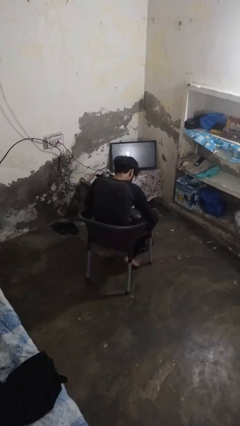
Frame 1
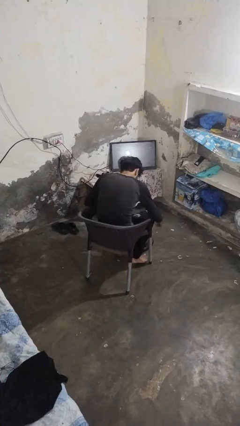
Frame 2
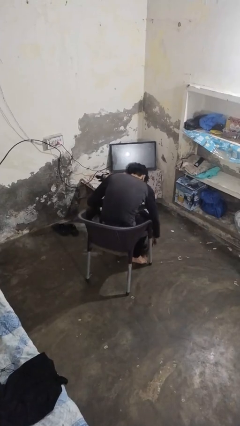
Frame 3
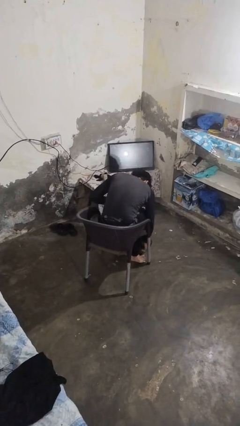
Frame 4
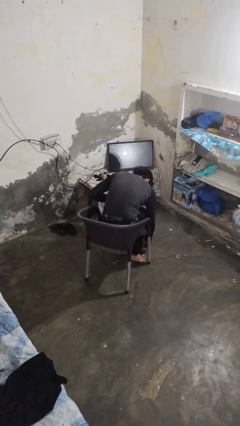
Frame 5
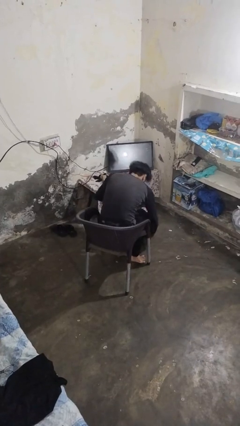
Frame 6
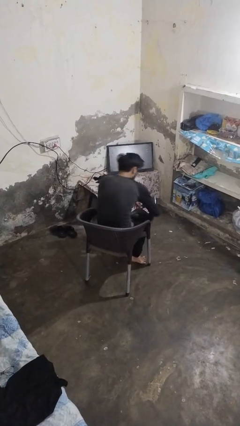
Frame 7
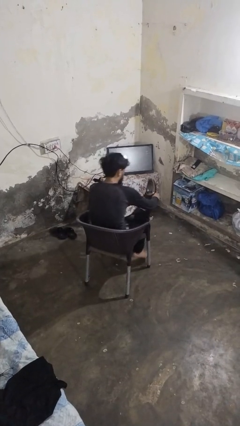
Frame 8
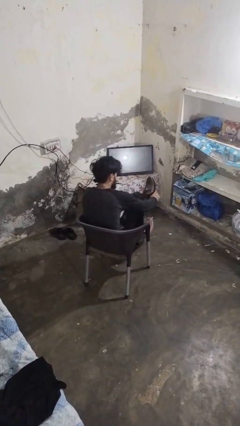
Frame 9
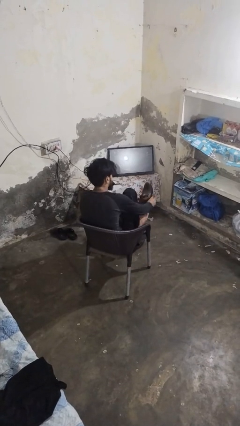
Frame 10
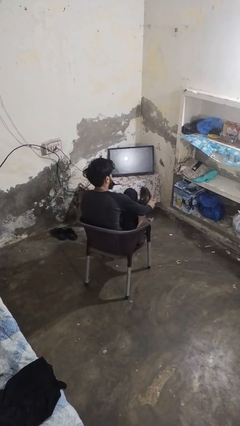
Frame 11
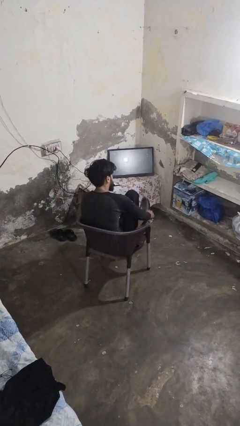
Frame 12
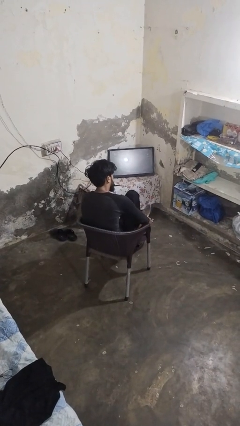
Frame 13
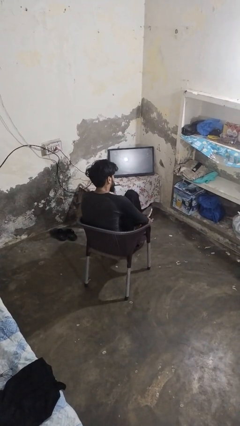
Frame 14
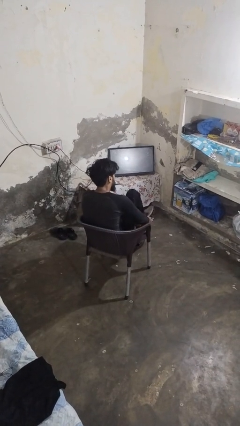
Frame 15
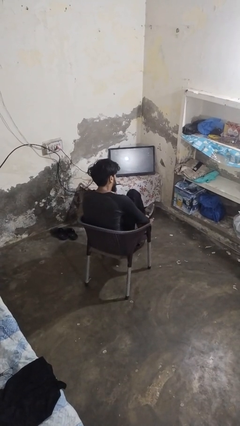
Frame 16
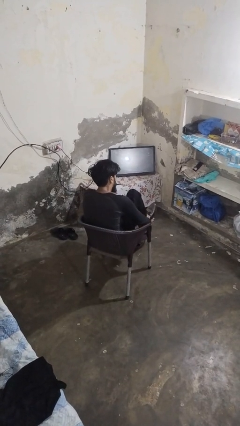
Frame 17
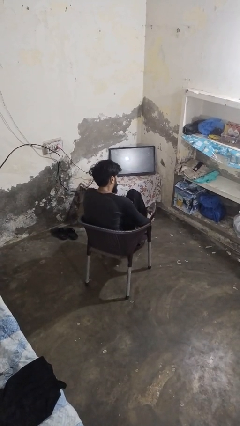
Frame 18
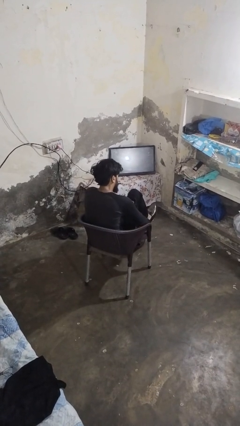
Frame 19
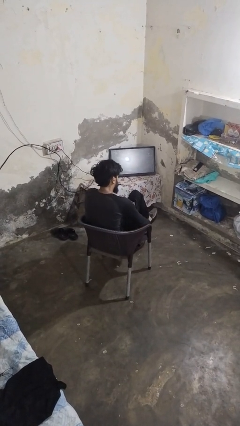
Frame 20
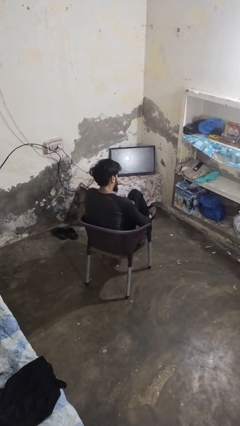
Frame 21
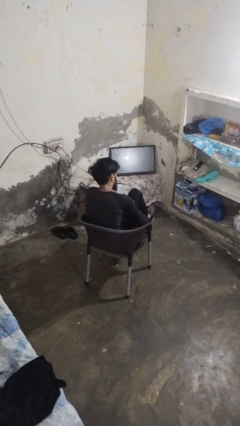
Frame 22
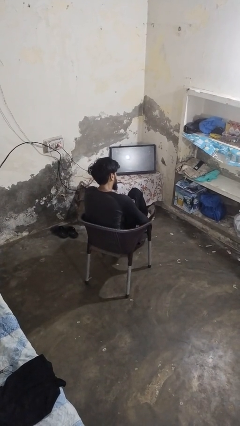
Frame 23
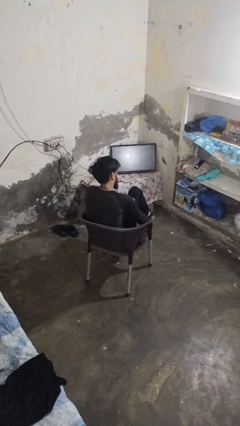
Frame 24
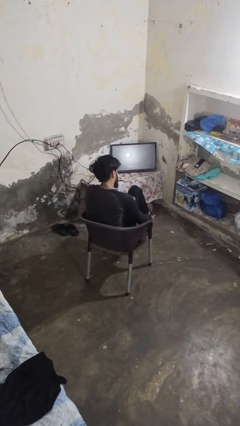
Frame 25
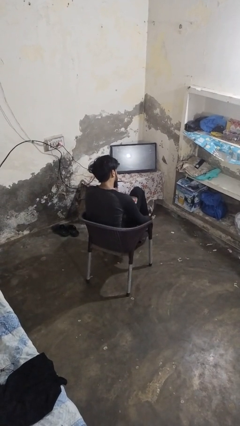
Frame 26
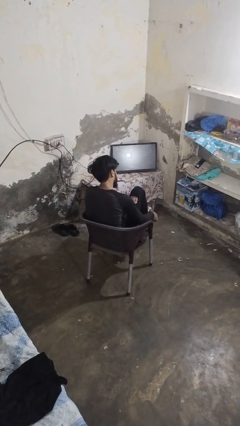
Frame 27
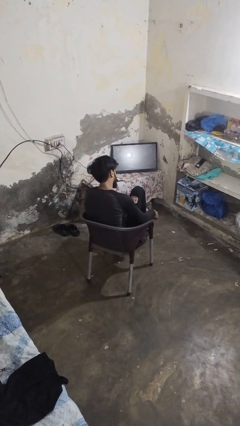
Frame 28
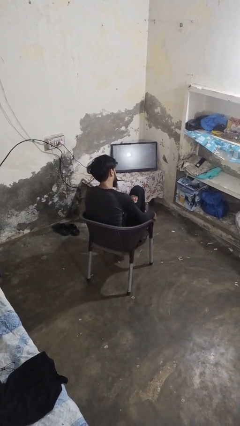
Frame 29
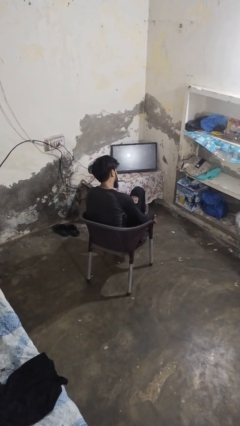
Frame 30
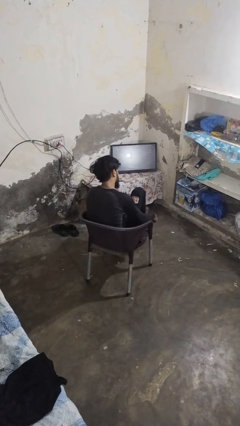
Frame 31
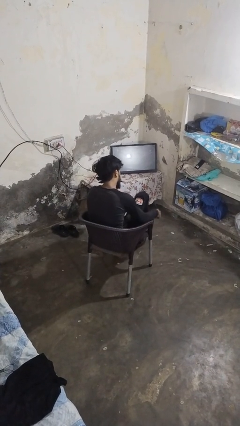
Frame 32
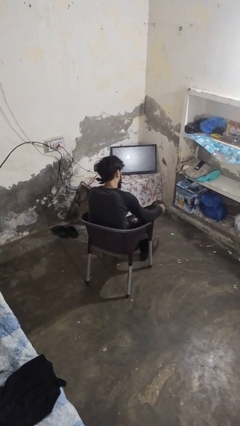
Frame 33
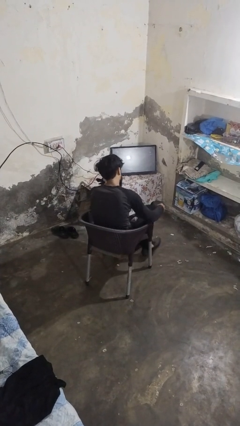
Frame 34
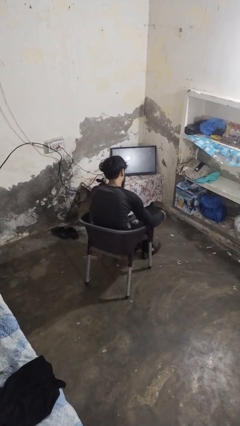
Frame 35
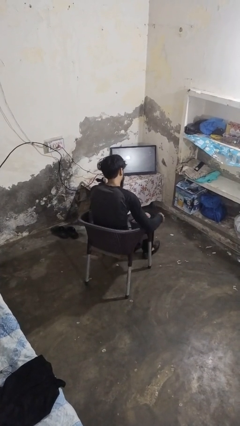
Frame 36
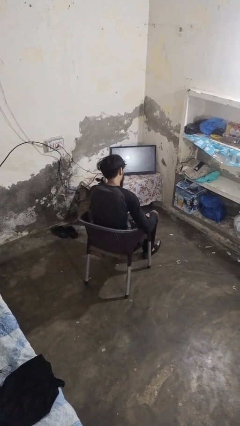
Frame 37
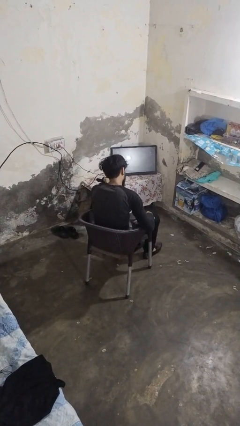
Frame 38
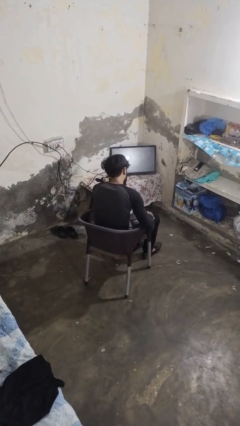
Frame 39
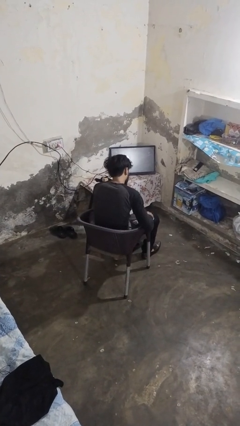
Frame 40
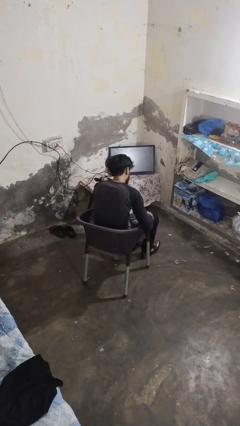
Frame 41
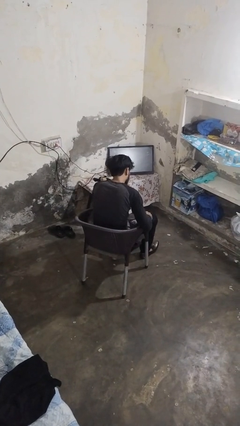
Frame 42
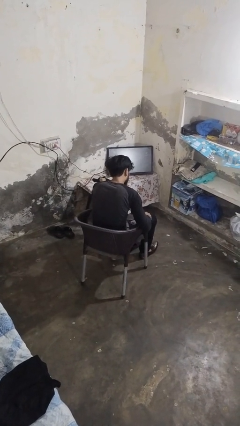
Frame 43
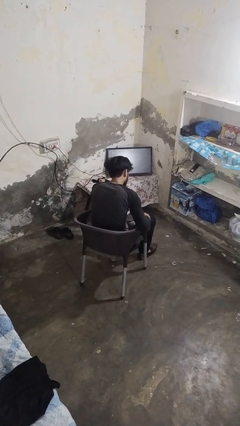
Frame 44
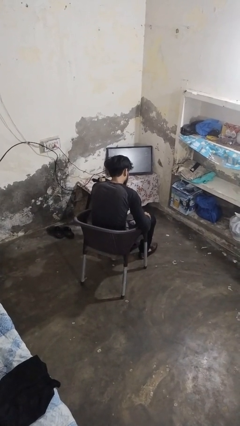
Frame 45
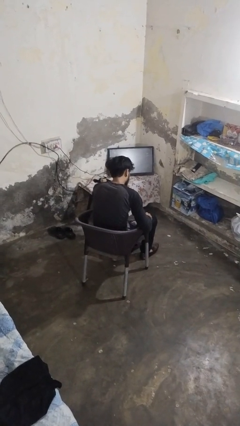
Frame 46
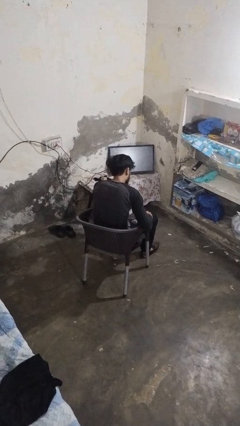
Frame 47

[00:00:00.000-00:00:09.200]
person puts on shoes

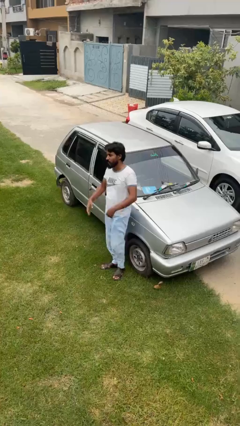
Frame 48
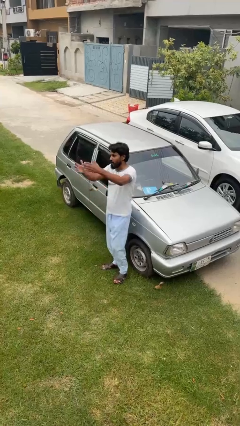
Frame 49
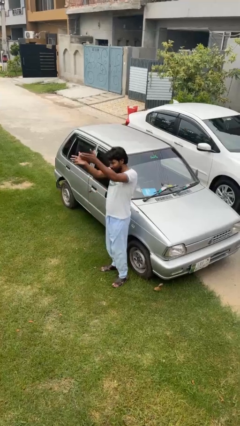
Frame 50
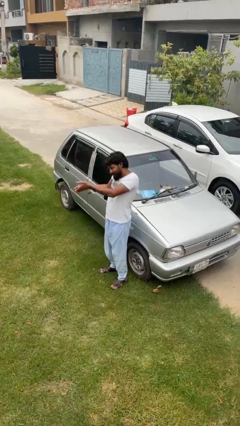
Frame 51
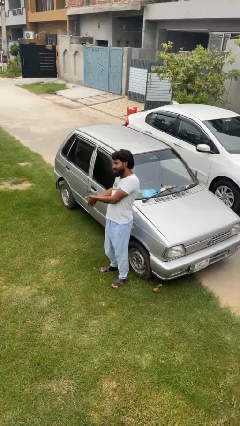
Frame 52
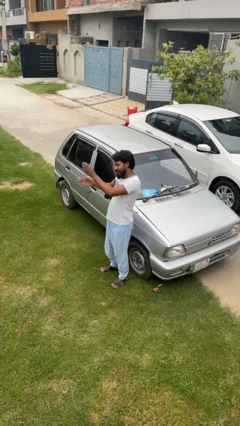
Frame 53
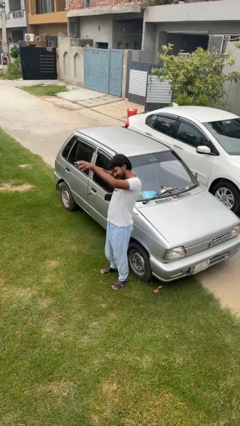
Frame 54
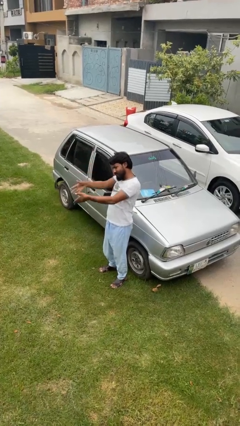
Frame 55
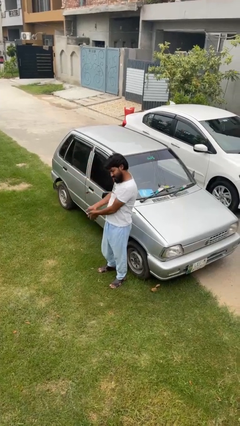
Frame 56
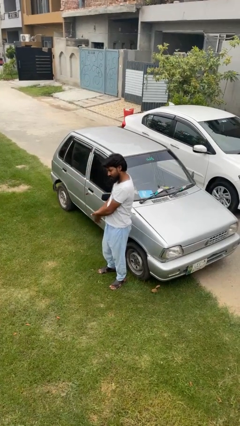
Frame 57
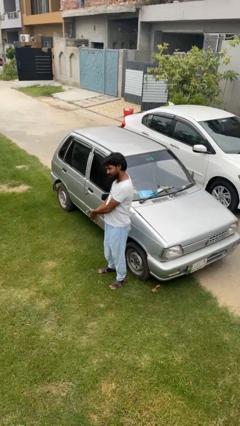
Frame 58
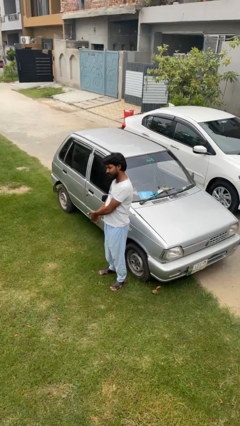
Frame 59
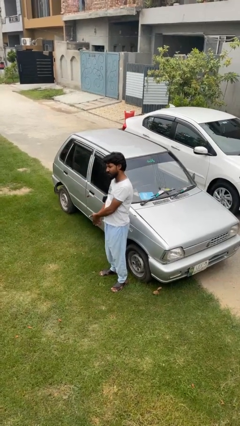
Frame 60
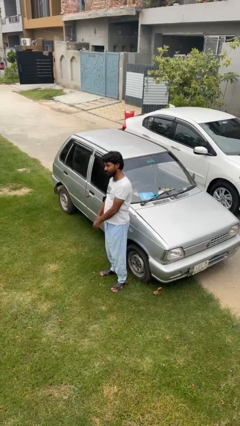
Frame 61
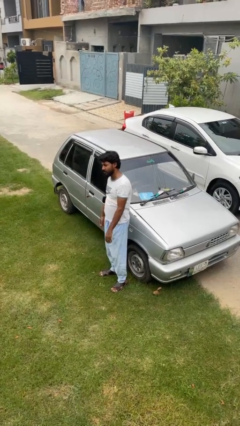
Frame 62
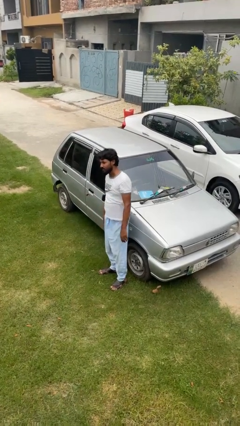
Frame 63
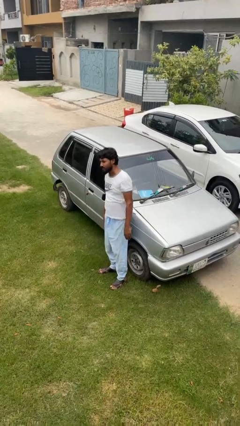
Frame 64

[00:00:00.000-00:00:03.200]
person gestures come here

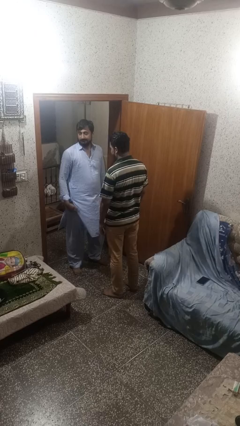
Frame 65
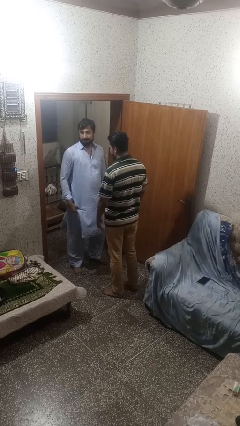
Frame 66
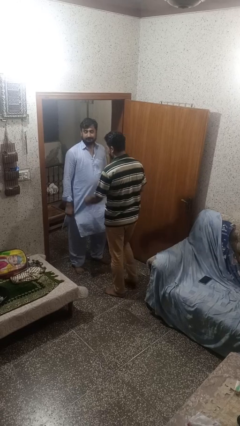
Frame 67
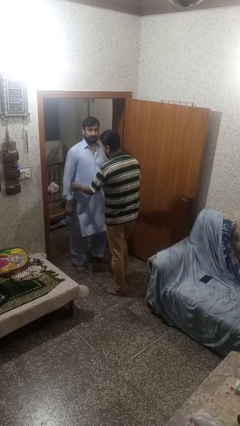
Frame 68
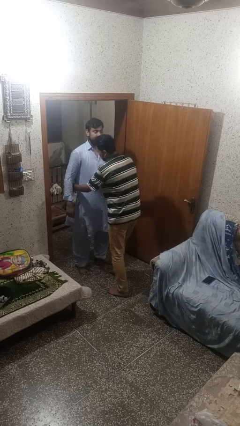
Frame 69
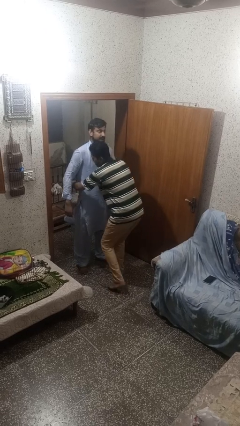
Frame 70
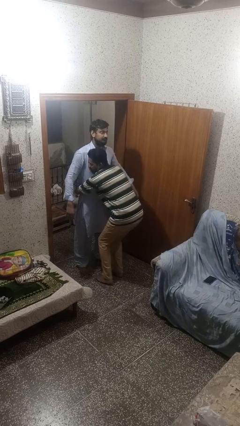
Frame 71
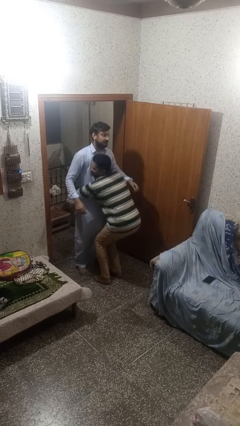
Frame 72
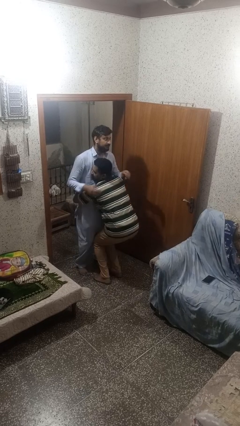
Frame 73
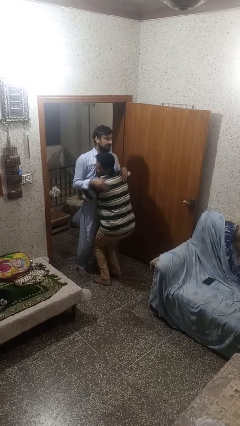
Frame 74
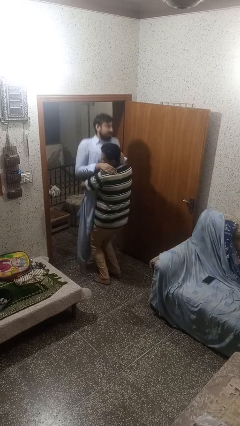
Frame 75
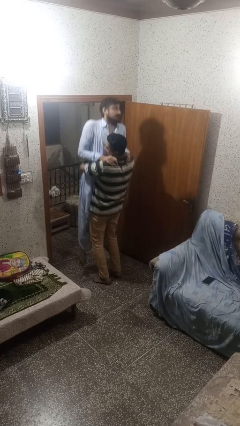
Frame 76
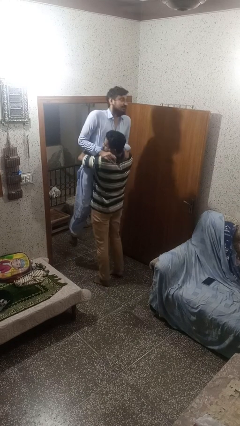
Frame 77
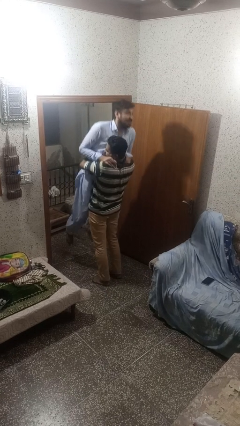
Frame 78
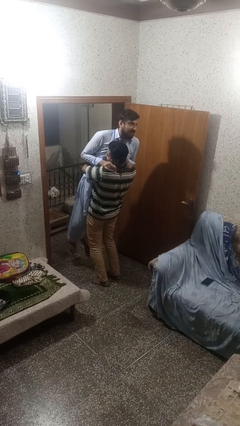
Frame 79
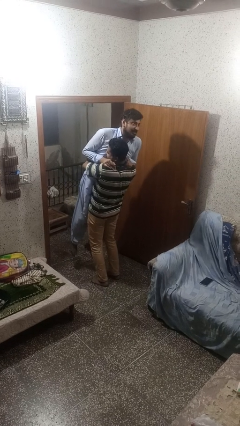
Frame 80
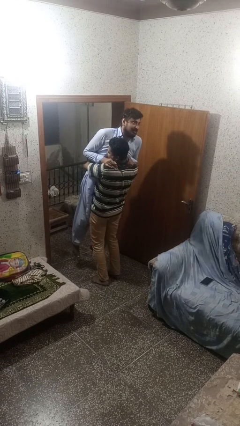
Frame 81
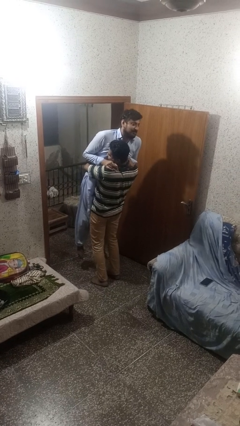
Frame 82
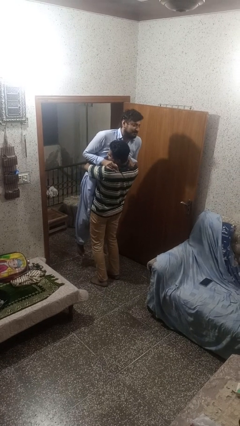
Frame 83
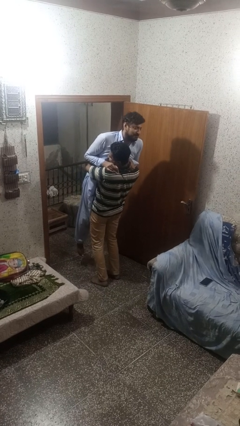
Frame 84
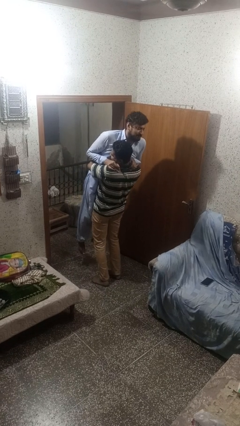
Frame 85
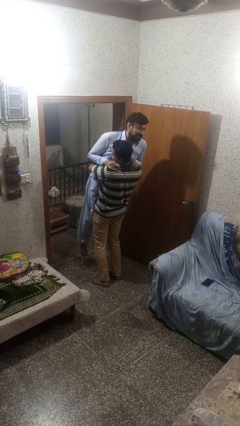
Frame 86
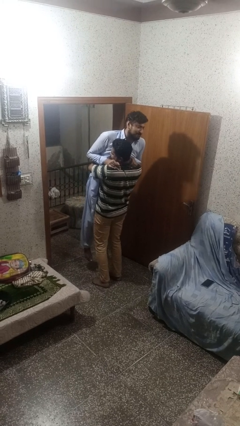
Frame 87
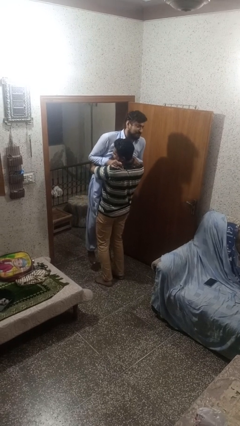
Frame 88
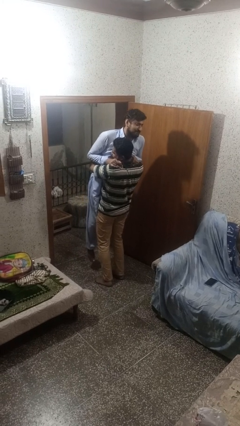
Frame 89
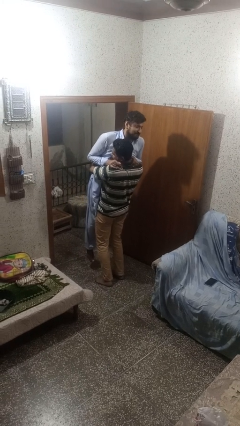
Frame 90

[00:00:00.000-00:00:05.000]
person picks up person

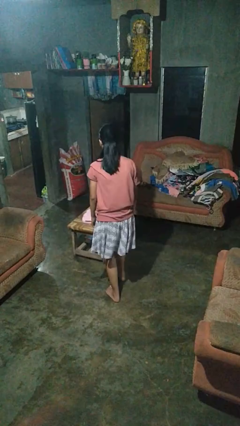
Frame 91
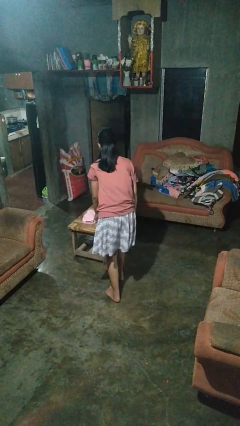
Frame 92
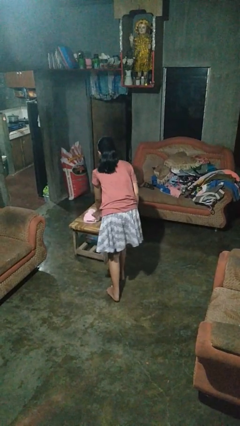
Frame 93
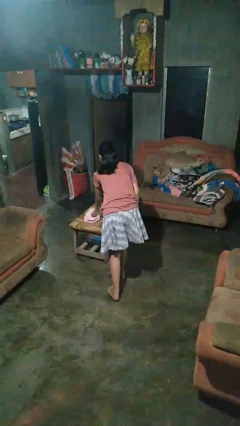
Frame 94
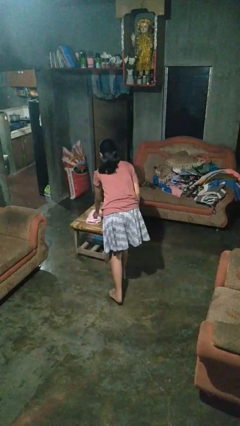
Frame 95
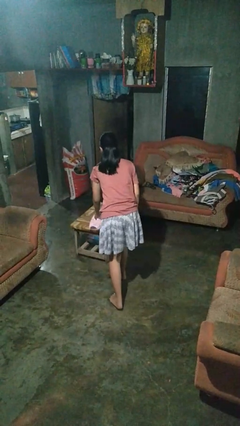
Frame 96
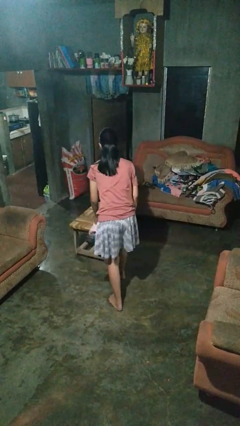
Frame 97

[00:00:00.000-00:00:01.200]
person picks up object from table
